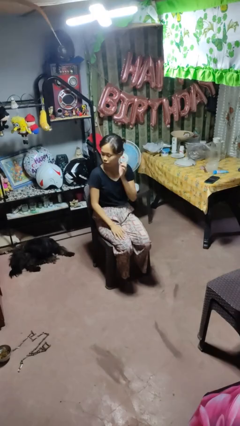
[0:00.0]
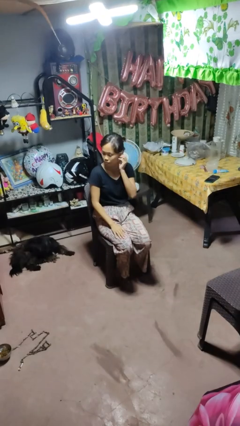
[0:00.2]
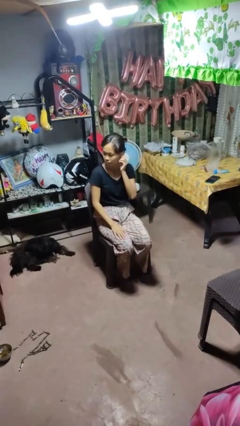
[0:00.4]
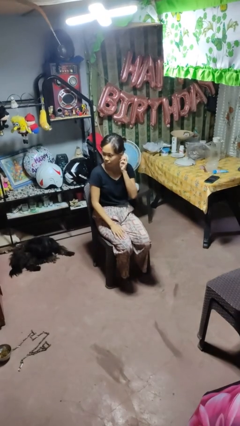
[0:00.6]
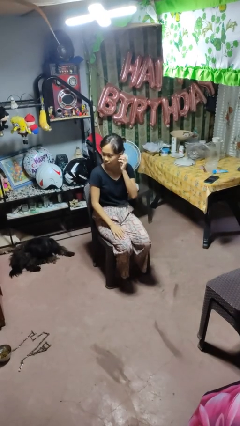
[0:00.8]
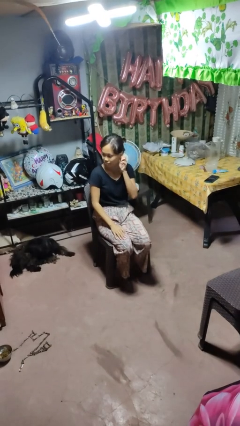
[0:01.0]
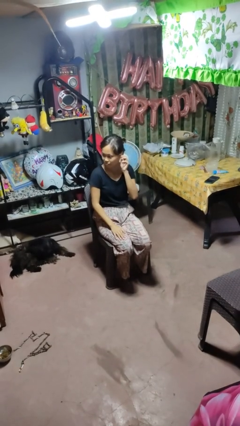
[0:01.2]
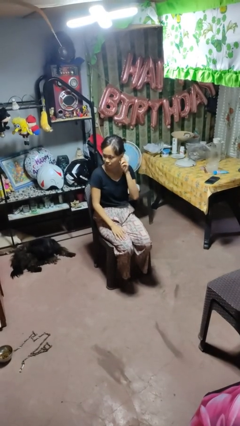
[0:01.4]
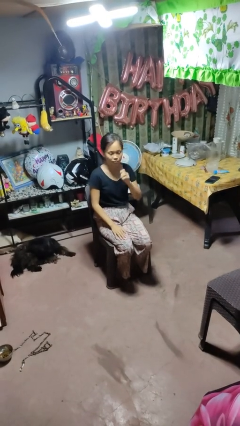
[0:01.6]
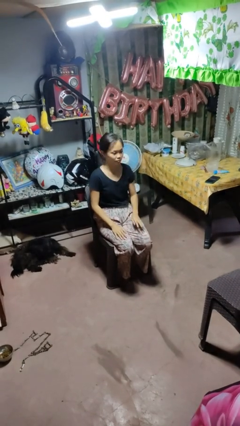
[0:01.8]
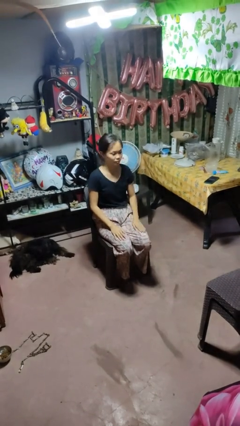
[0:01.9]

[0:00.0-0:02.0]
person touches earlobe

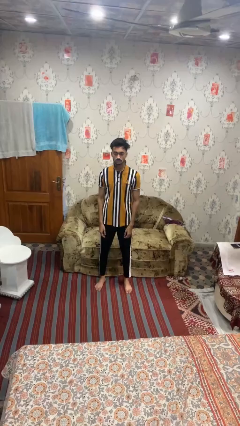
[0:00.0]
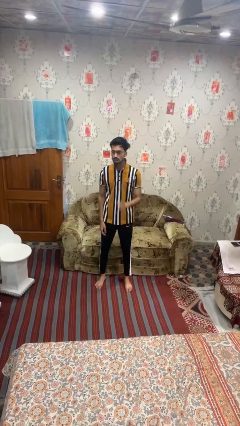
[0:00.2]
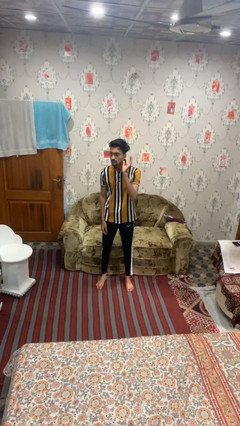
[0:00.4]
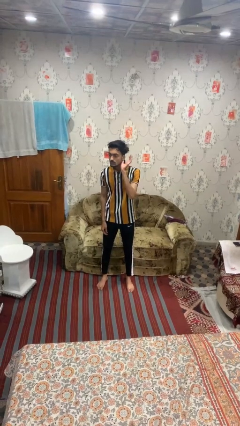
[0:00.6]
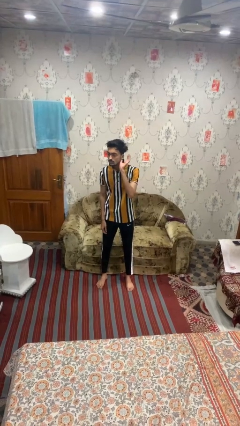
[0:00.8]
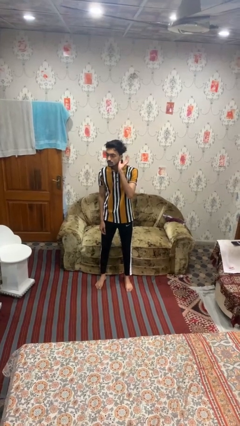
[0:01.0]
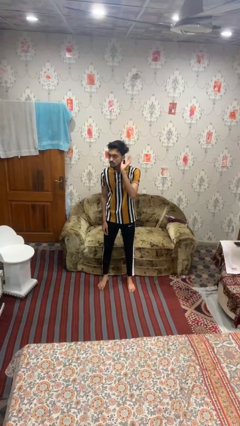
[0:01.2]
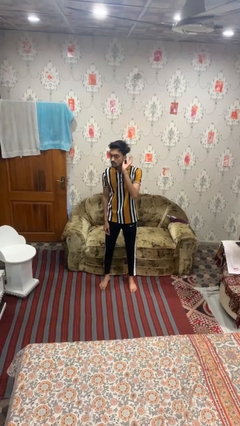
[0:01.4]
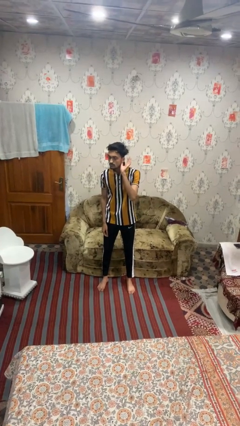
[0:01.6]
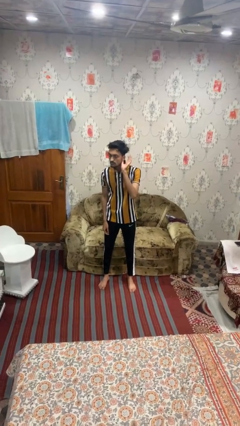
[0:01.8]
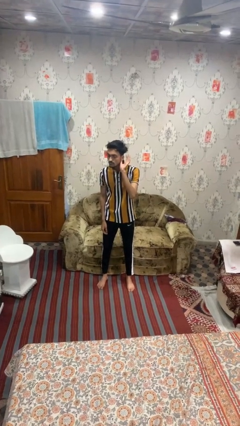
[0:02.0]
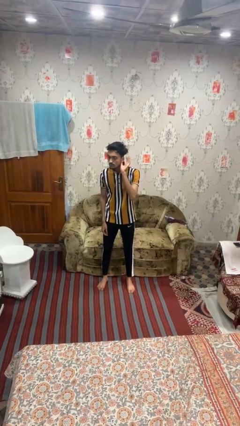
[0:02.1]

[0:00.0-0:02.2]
person gestures listen closely

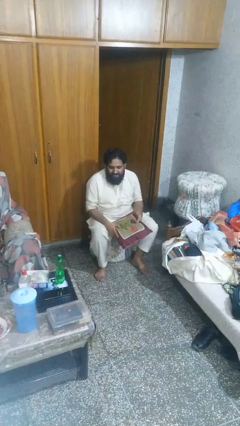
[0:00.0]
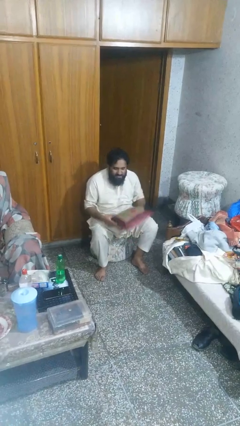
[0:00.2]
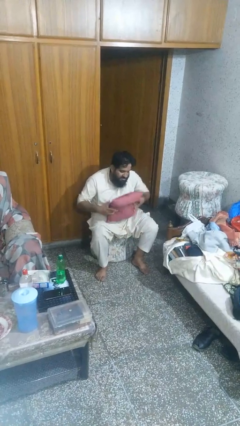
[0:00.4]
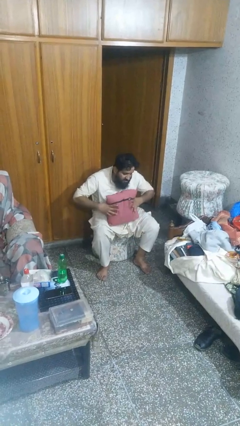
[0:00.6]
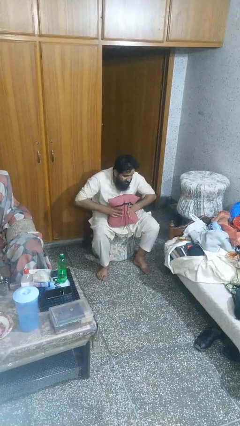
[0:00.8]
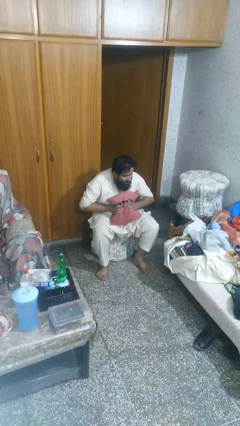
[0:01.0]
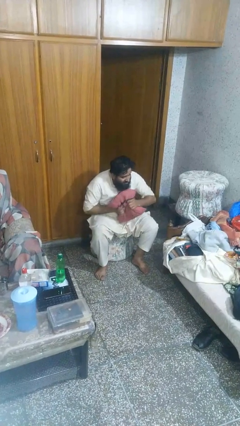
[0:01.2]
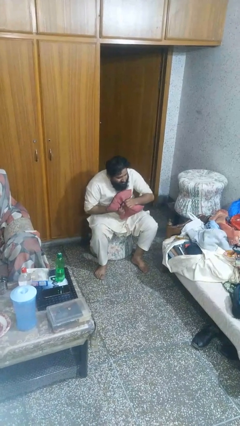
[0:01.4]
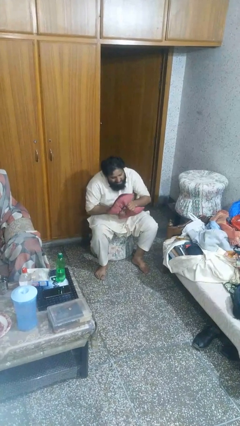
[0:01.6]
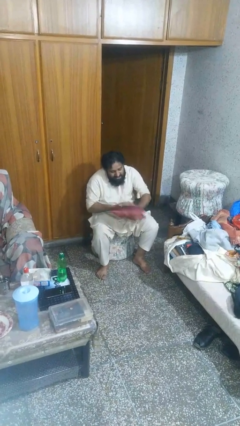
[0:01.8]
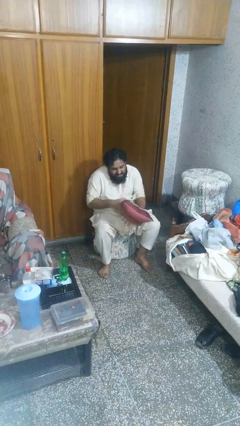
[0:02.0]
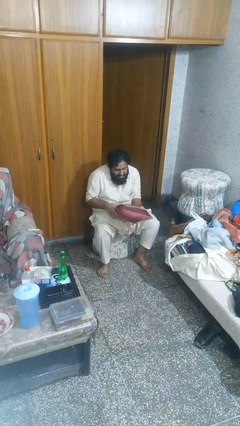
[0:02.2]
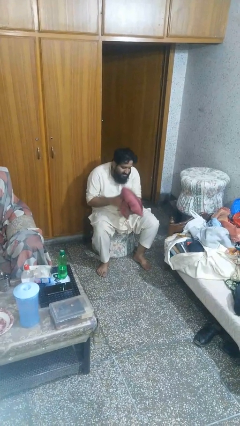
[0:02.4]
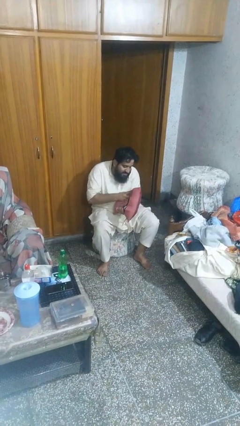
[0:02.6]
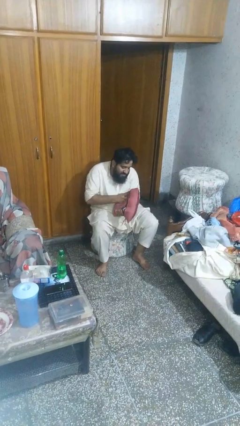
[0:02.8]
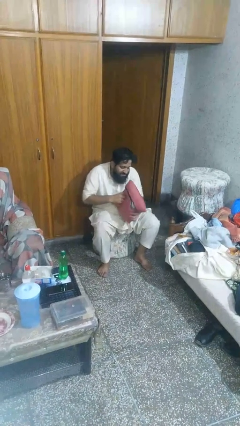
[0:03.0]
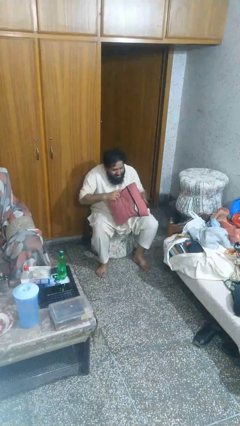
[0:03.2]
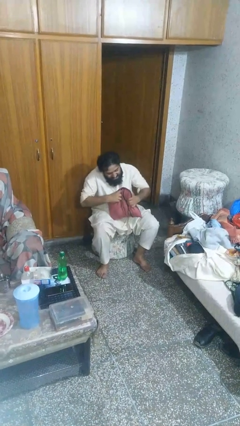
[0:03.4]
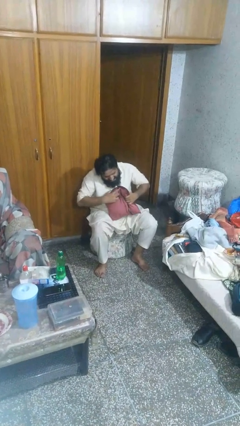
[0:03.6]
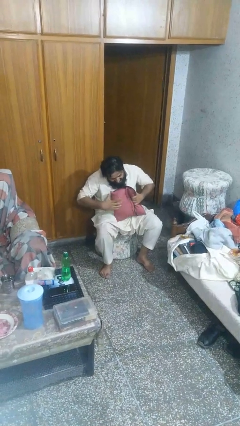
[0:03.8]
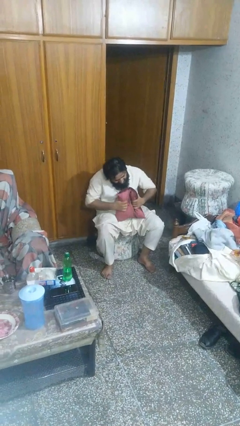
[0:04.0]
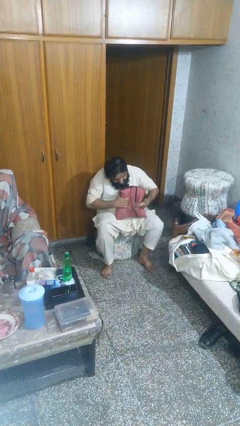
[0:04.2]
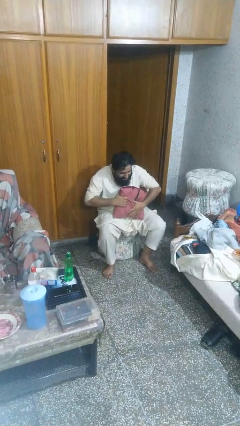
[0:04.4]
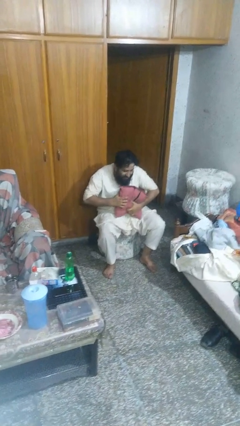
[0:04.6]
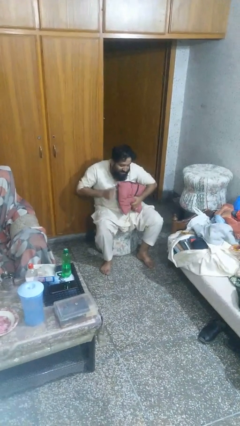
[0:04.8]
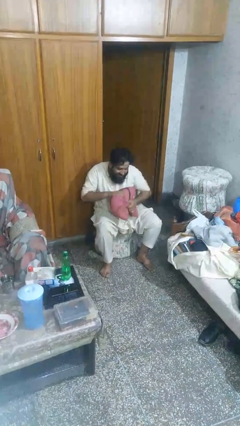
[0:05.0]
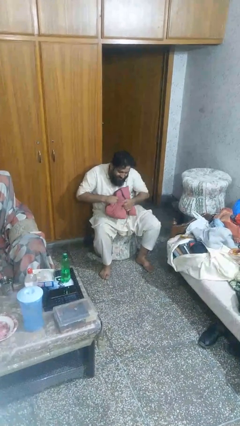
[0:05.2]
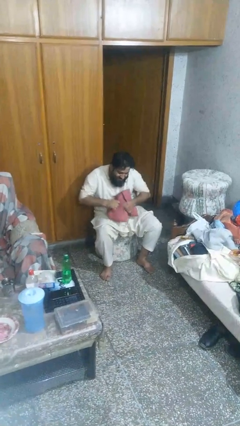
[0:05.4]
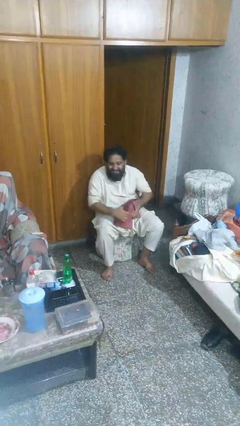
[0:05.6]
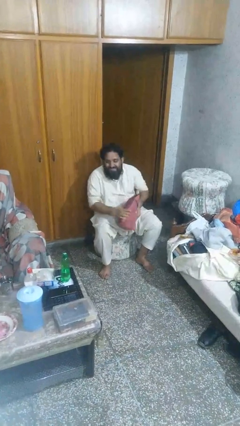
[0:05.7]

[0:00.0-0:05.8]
person squeezes object

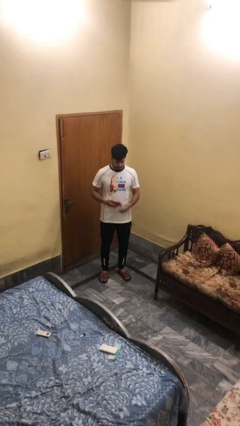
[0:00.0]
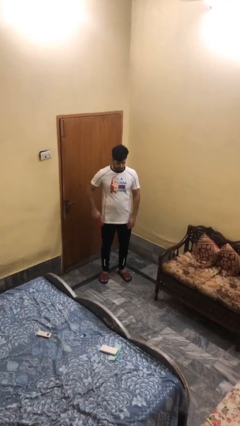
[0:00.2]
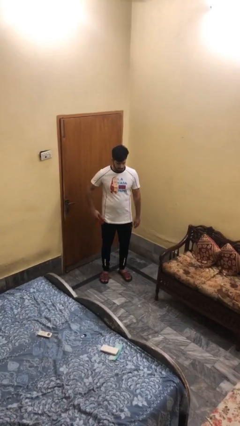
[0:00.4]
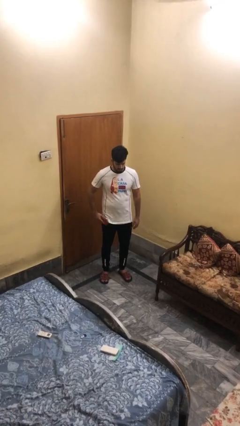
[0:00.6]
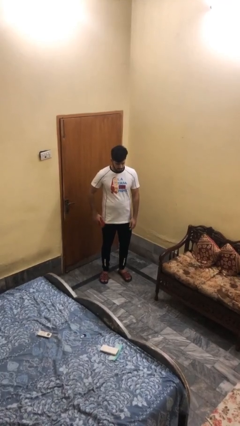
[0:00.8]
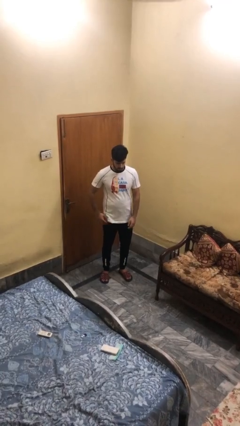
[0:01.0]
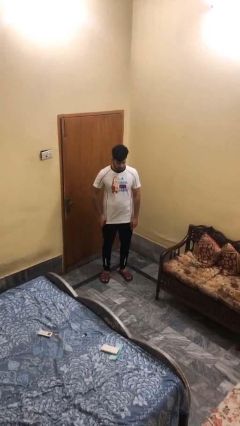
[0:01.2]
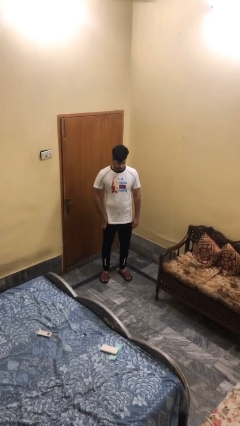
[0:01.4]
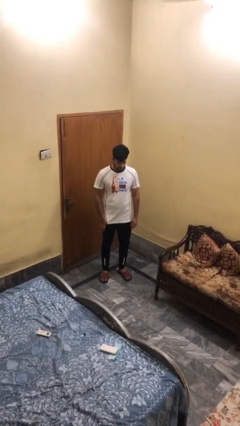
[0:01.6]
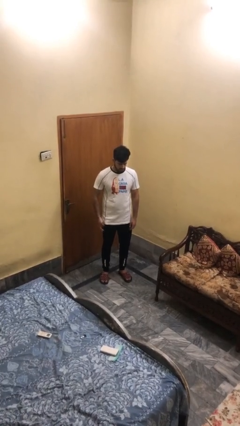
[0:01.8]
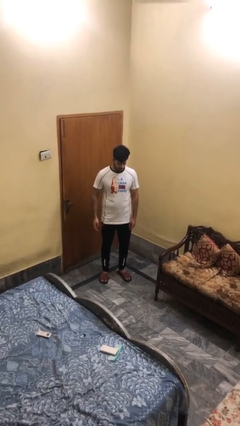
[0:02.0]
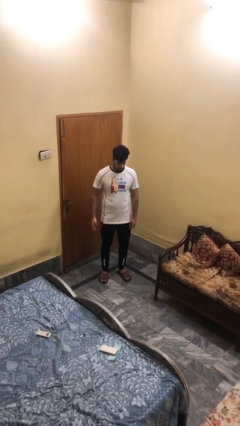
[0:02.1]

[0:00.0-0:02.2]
person puts phone into pocket

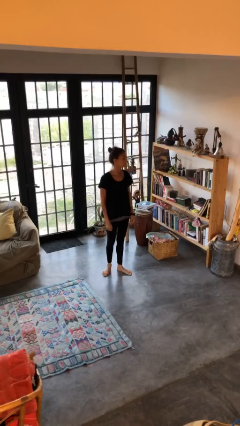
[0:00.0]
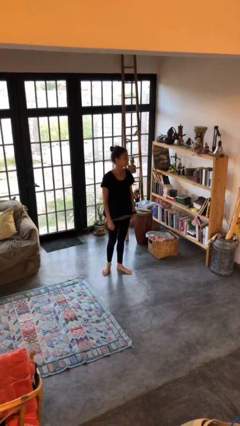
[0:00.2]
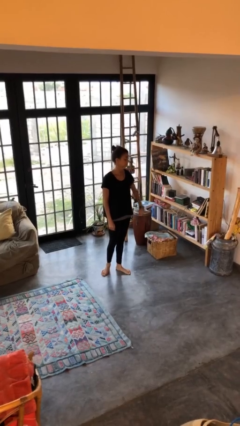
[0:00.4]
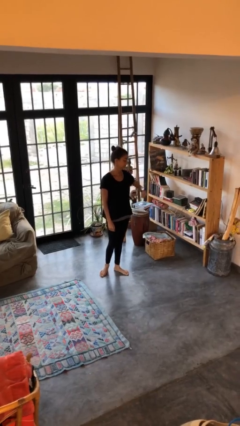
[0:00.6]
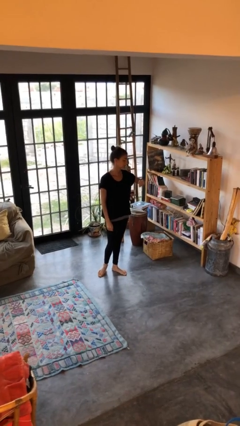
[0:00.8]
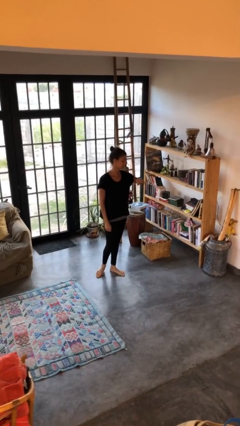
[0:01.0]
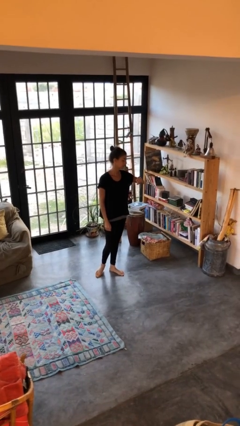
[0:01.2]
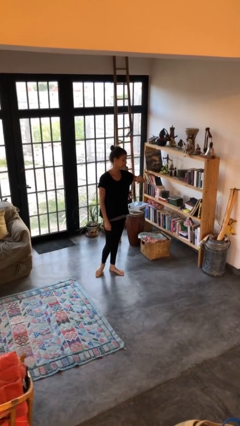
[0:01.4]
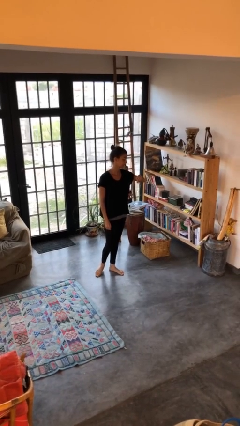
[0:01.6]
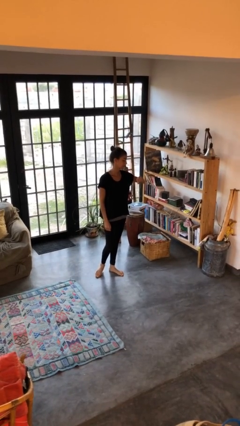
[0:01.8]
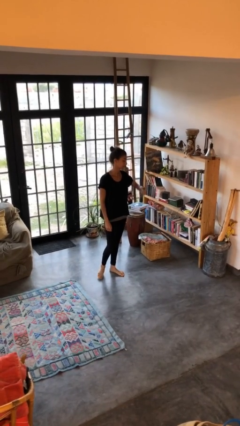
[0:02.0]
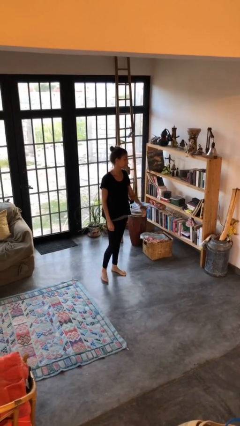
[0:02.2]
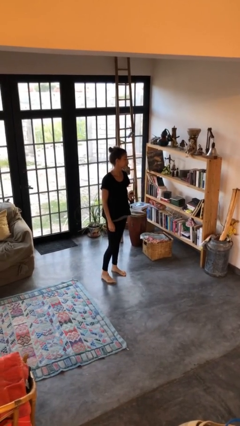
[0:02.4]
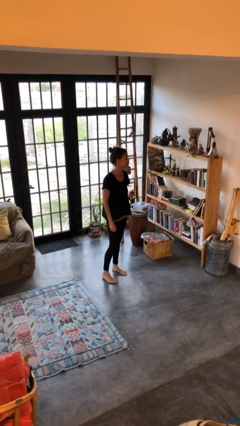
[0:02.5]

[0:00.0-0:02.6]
person looks at wristwatch

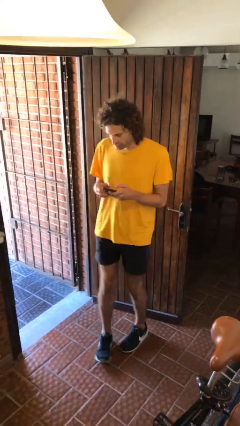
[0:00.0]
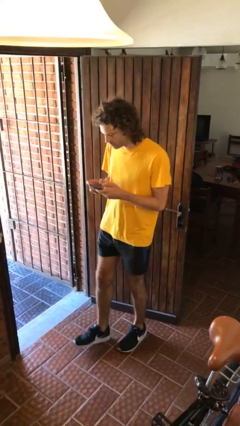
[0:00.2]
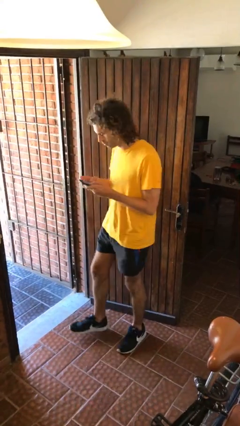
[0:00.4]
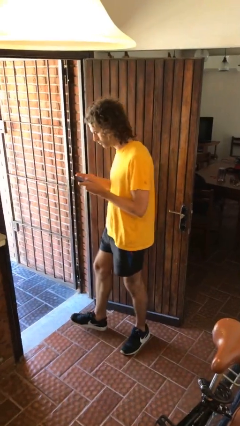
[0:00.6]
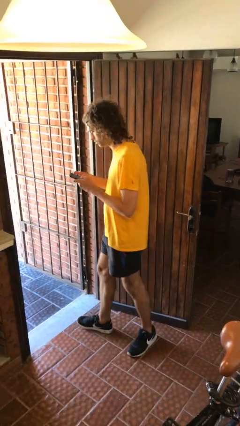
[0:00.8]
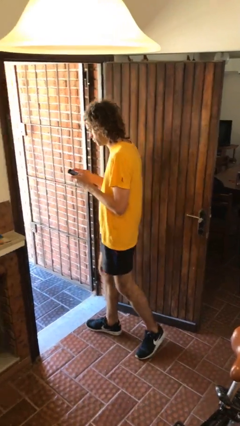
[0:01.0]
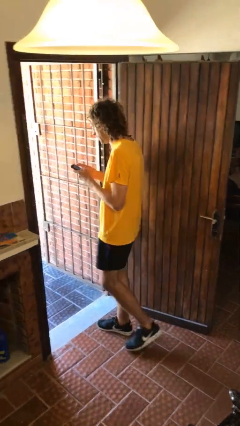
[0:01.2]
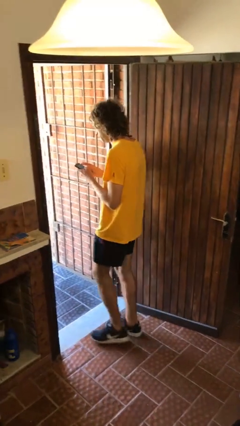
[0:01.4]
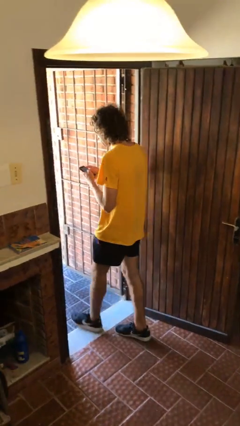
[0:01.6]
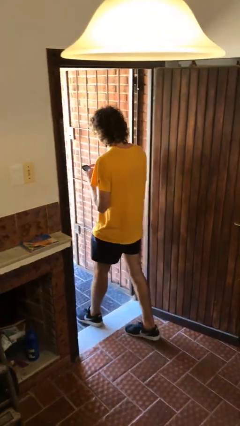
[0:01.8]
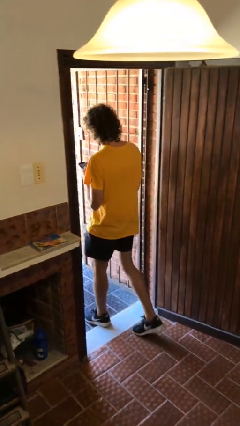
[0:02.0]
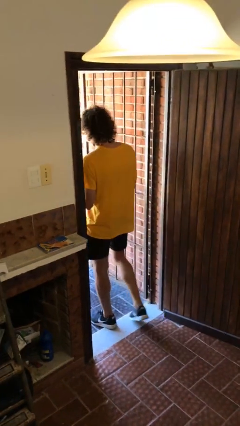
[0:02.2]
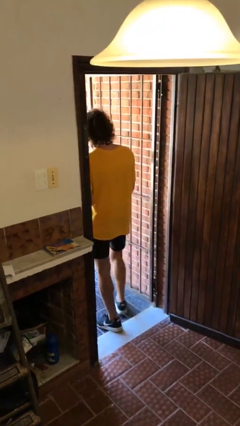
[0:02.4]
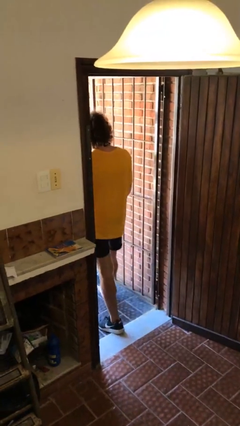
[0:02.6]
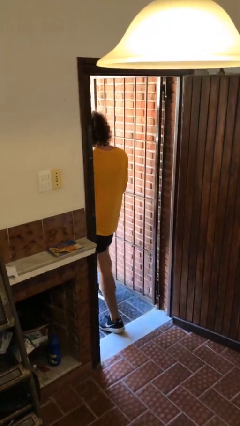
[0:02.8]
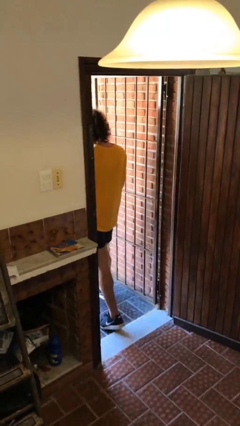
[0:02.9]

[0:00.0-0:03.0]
person exits scene through structure
